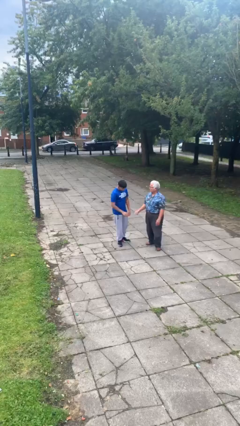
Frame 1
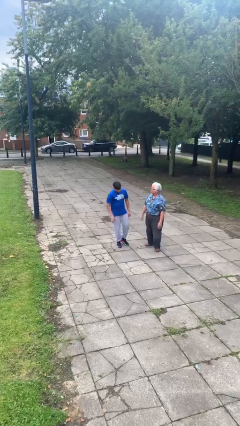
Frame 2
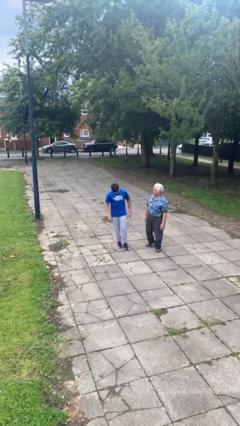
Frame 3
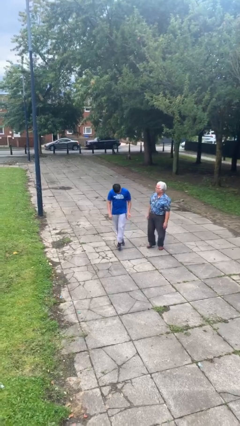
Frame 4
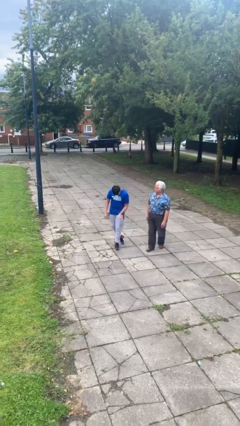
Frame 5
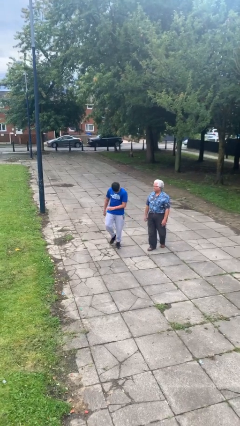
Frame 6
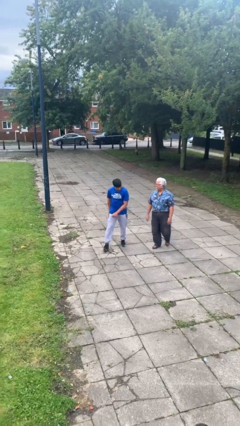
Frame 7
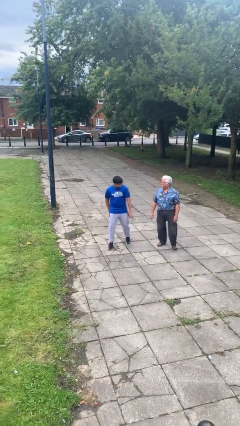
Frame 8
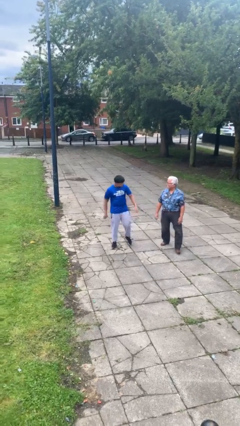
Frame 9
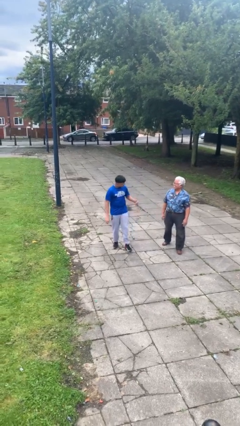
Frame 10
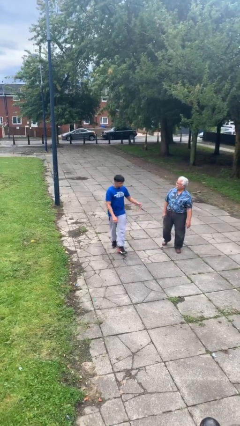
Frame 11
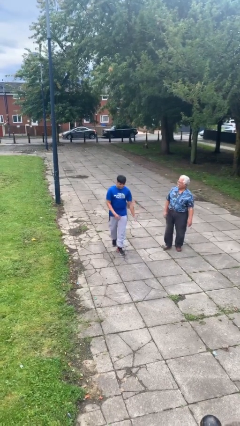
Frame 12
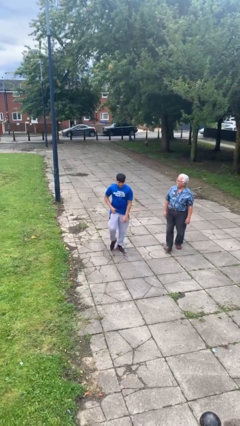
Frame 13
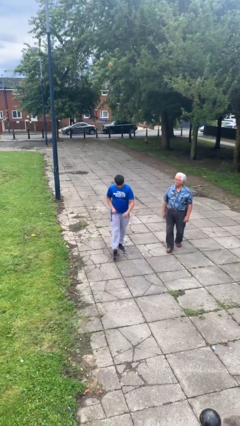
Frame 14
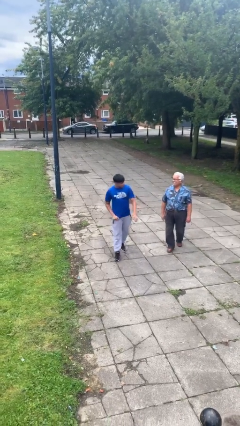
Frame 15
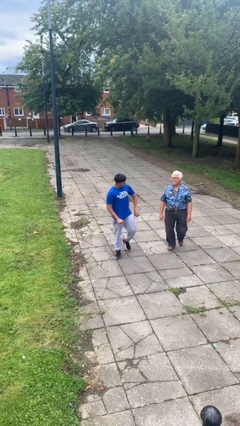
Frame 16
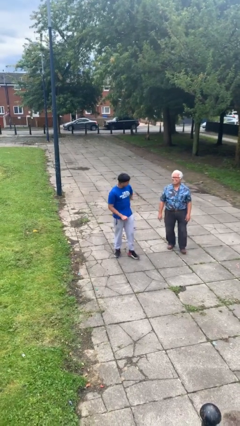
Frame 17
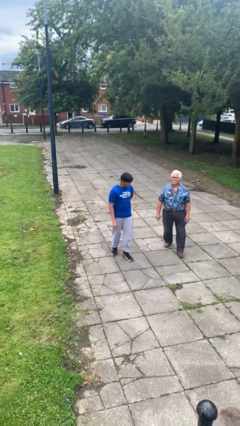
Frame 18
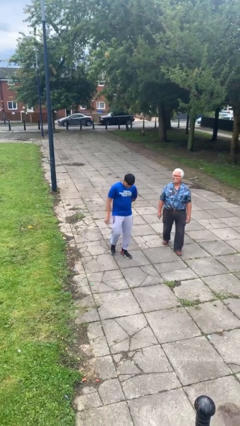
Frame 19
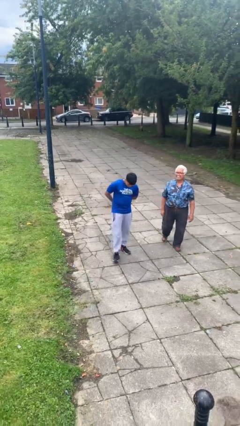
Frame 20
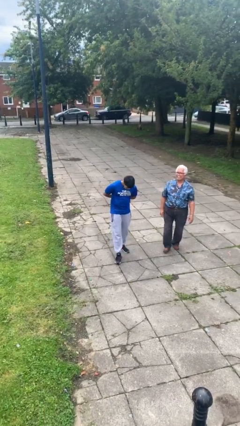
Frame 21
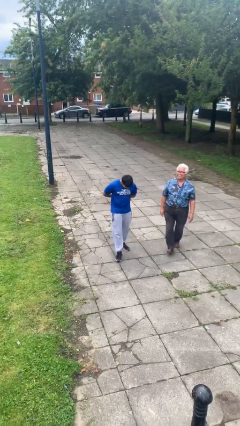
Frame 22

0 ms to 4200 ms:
person talks to person

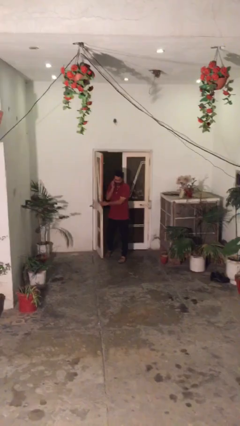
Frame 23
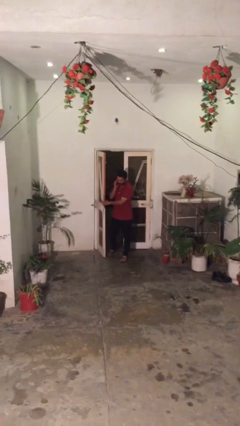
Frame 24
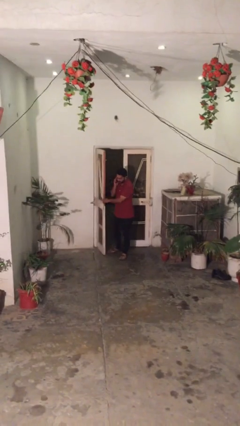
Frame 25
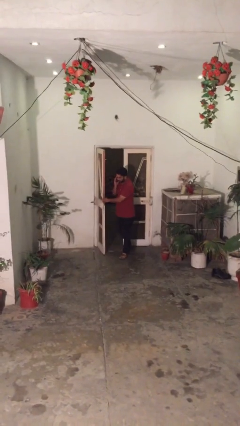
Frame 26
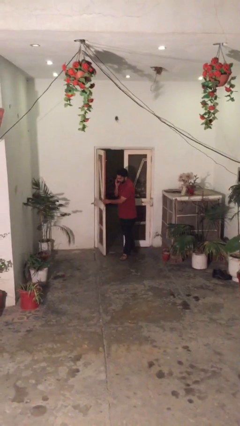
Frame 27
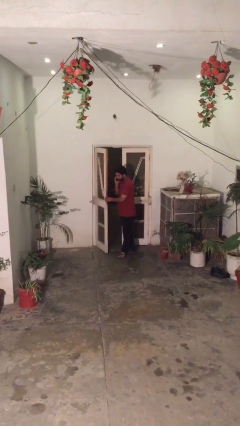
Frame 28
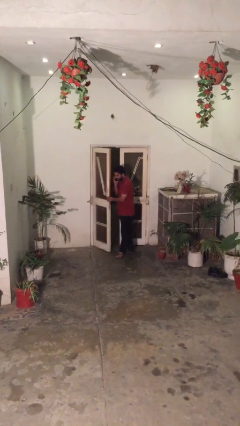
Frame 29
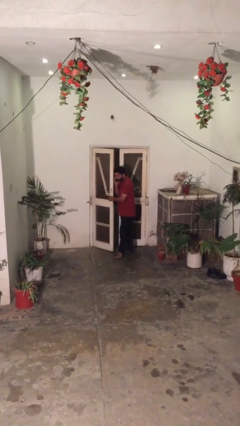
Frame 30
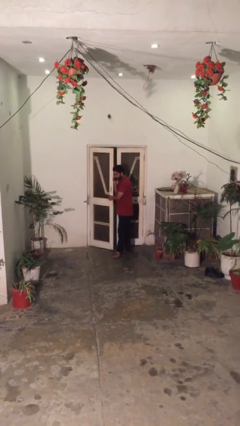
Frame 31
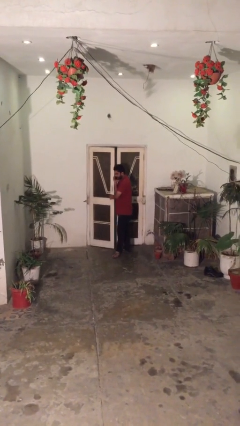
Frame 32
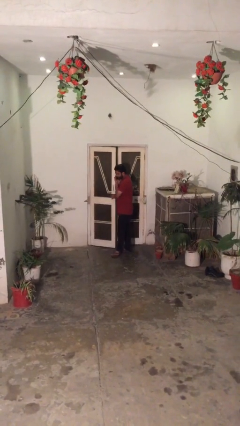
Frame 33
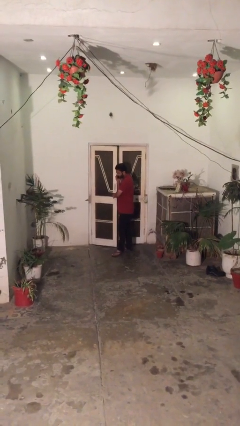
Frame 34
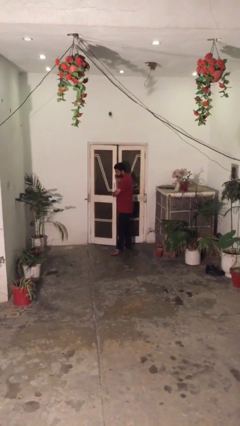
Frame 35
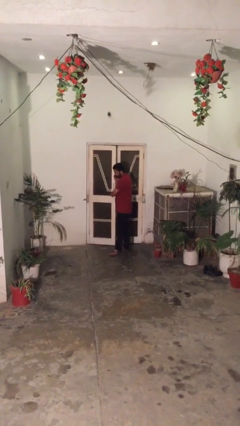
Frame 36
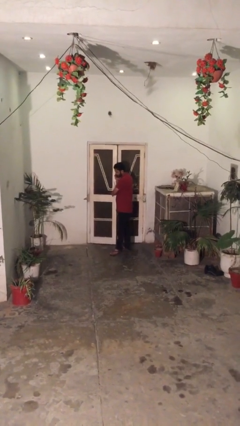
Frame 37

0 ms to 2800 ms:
person enters scene through structure

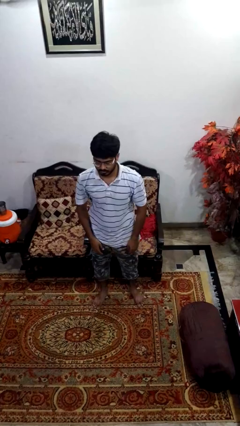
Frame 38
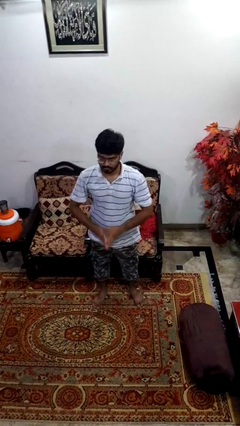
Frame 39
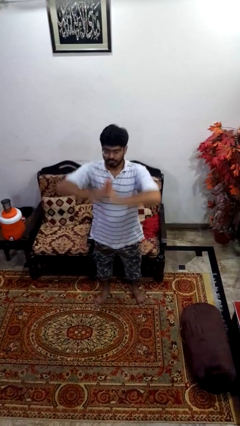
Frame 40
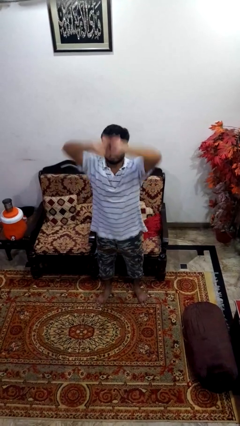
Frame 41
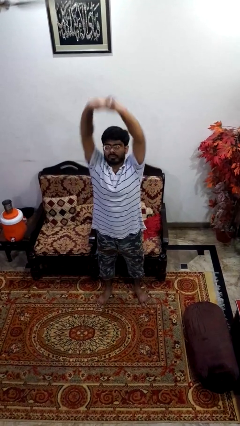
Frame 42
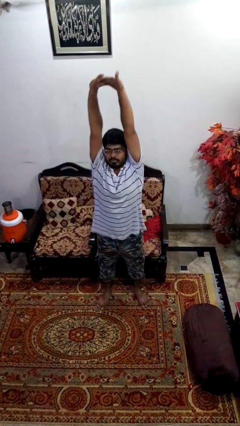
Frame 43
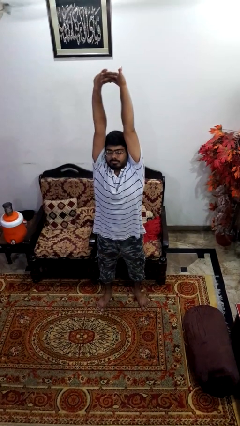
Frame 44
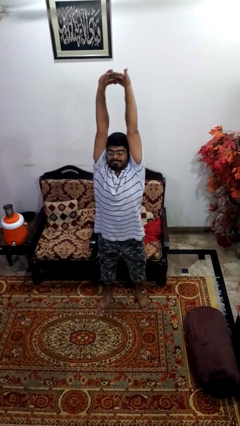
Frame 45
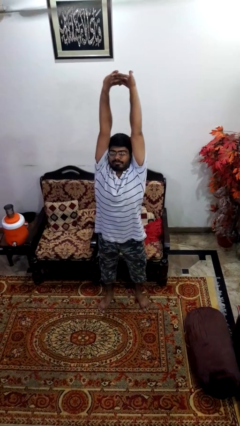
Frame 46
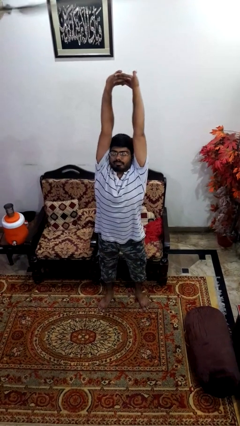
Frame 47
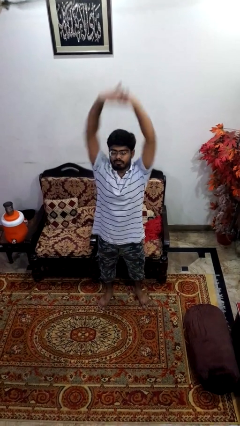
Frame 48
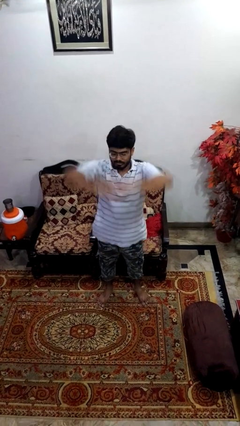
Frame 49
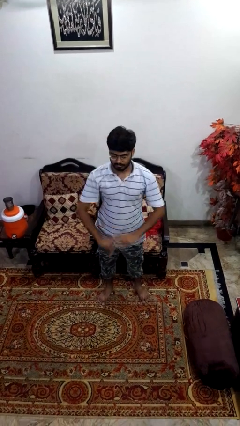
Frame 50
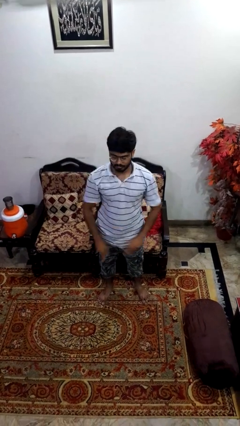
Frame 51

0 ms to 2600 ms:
person stretches arms over head

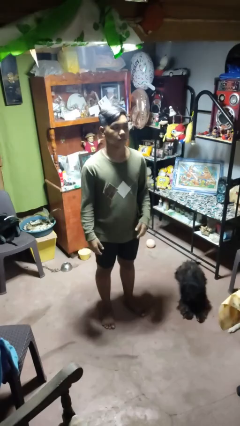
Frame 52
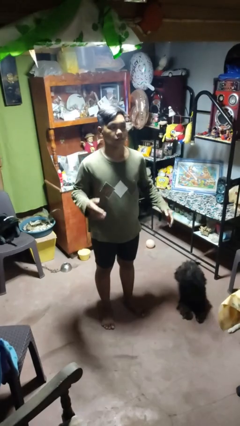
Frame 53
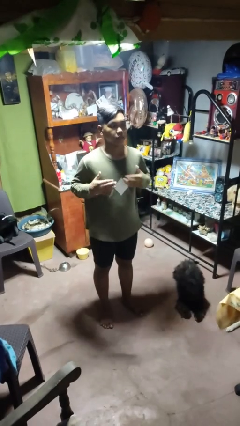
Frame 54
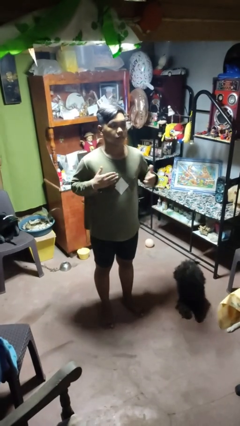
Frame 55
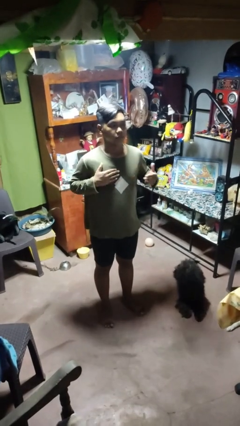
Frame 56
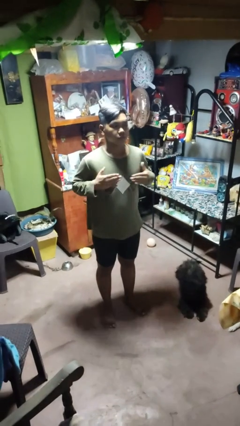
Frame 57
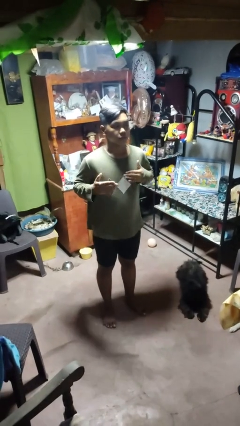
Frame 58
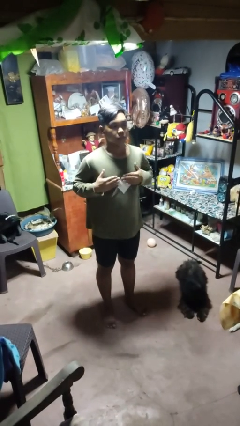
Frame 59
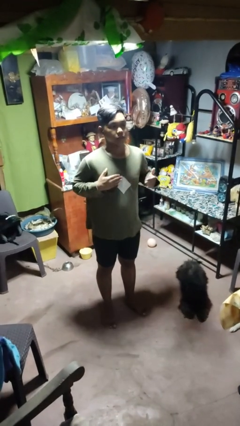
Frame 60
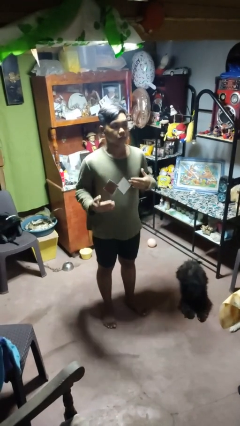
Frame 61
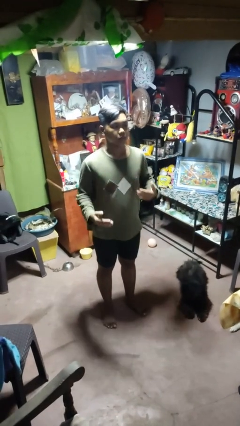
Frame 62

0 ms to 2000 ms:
person drums on chest

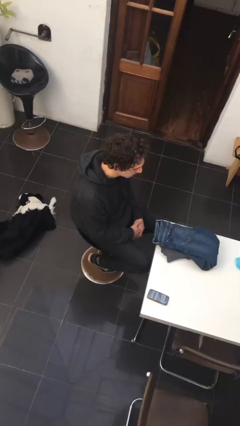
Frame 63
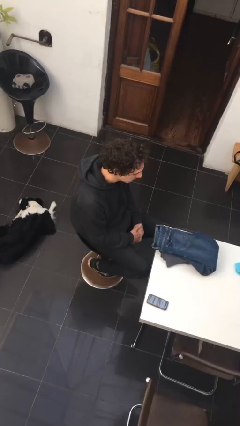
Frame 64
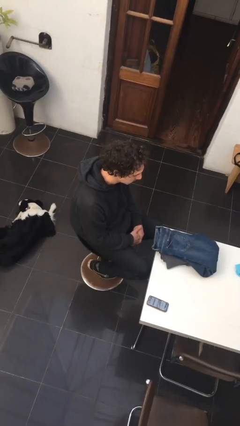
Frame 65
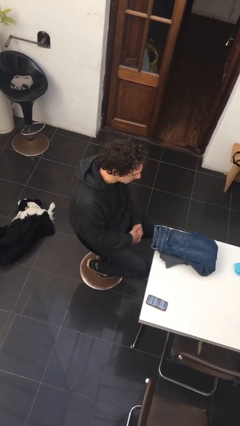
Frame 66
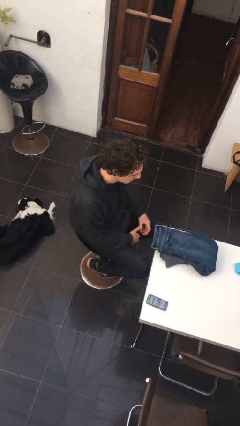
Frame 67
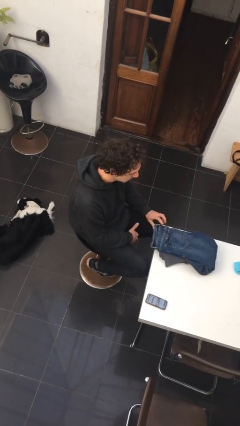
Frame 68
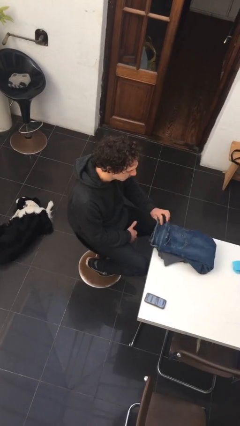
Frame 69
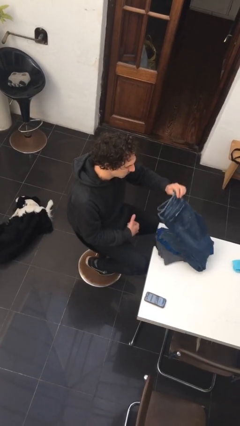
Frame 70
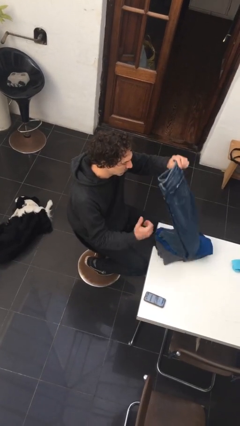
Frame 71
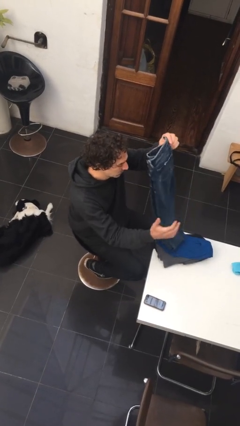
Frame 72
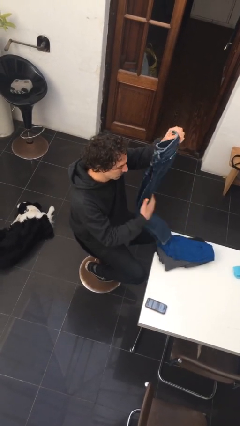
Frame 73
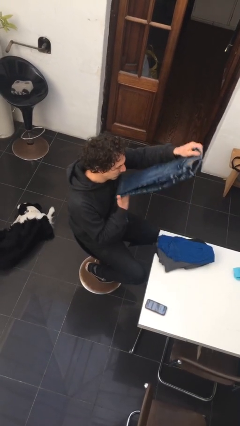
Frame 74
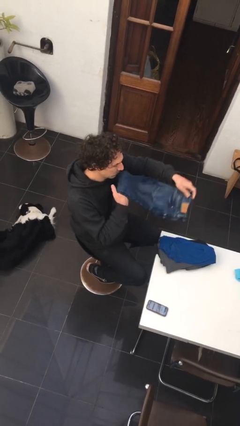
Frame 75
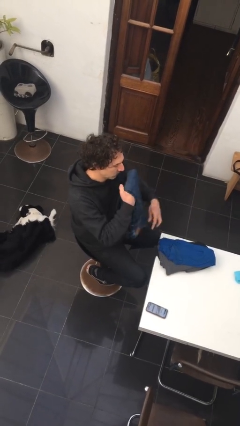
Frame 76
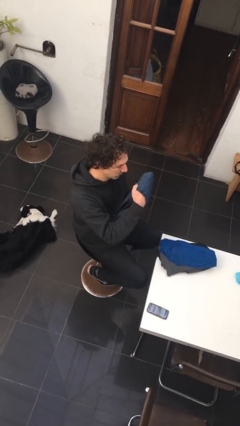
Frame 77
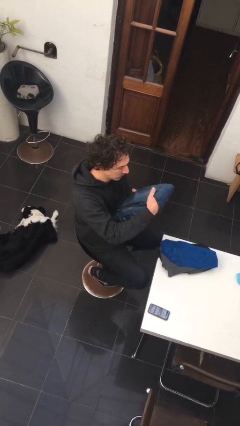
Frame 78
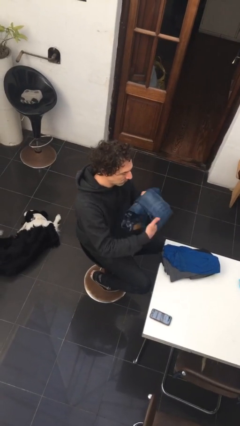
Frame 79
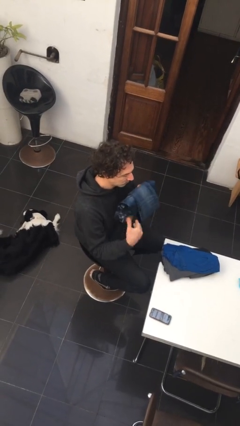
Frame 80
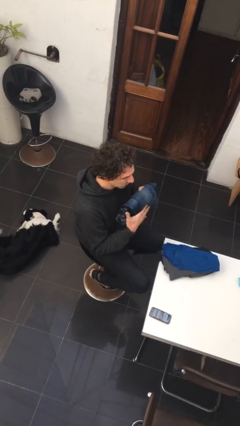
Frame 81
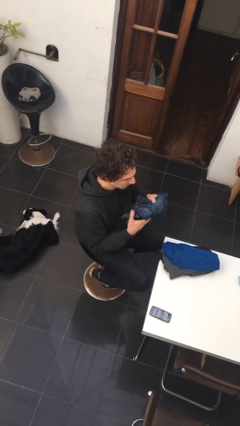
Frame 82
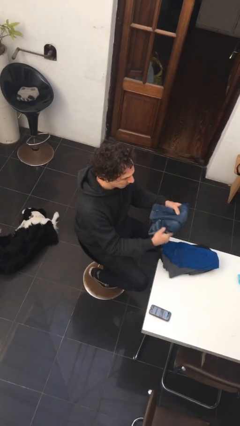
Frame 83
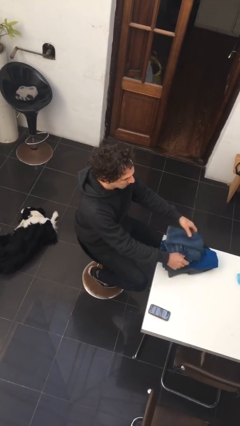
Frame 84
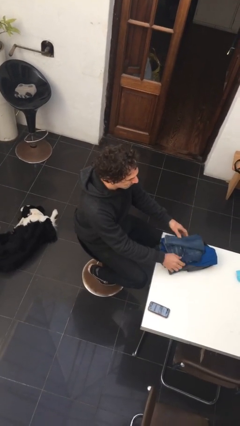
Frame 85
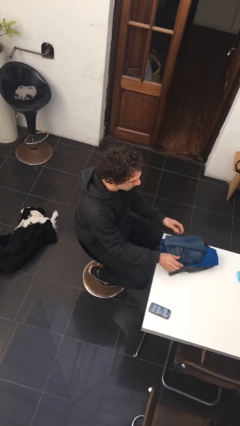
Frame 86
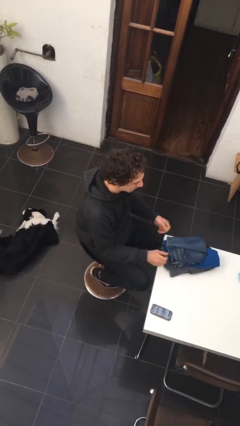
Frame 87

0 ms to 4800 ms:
person folds pants

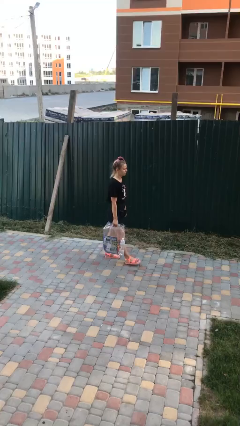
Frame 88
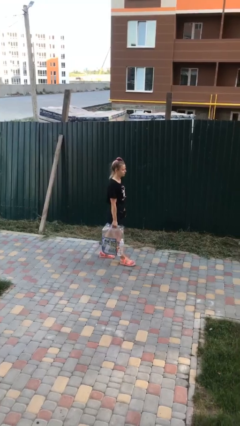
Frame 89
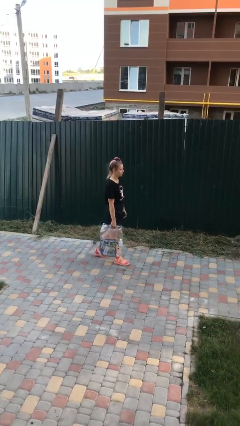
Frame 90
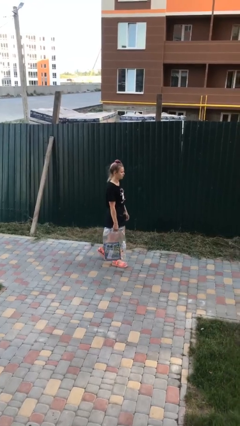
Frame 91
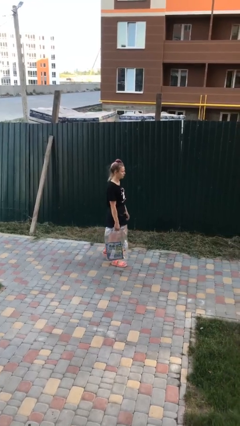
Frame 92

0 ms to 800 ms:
person carries groceries

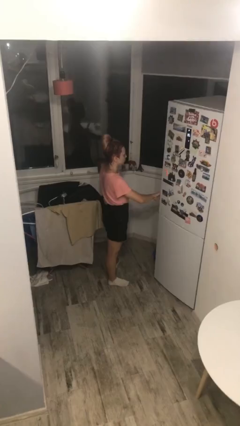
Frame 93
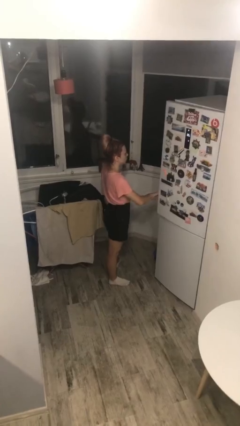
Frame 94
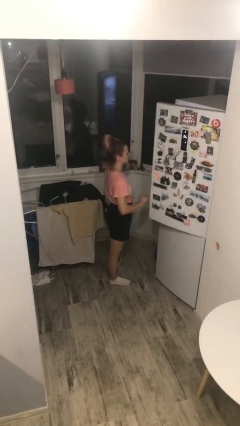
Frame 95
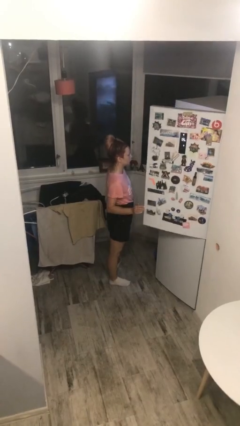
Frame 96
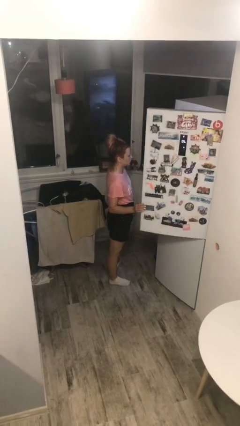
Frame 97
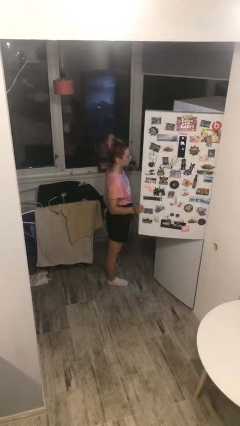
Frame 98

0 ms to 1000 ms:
person opens refrigerator
